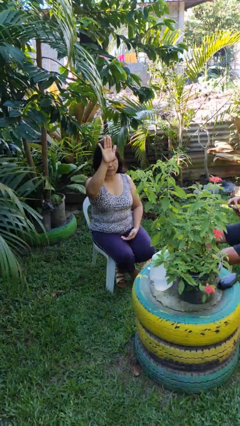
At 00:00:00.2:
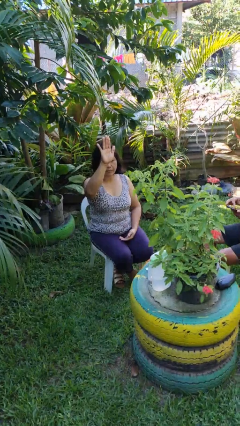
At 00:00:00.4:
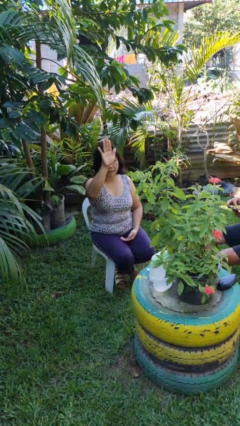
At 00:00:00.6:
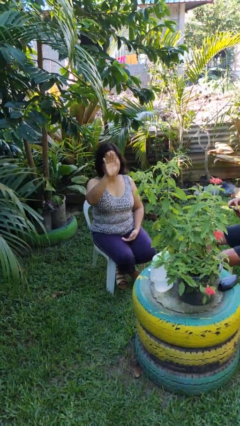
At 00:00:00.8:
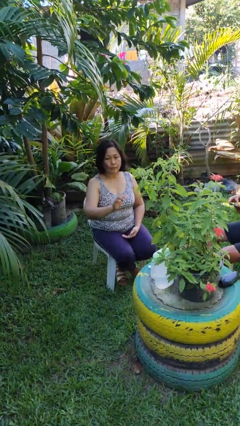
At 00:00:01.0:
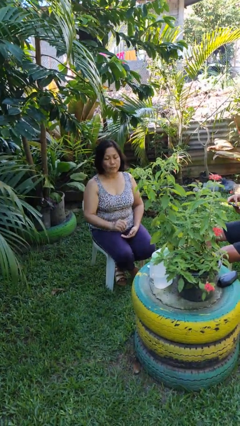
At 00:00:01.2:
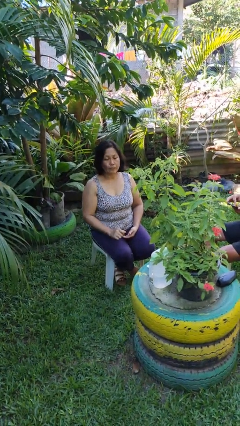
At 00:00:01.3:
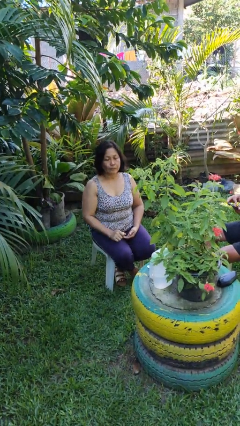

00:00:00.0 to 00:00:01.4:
person gestures swipe down

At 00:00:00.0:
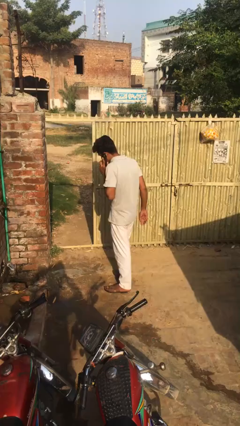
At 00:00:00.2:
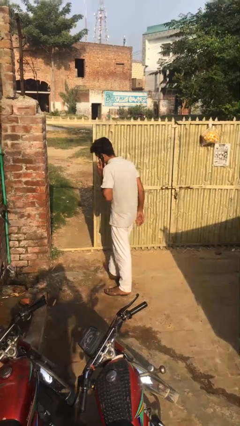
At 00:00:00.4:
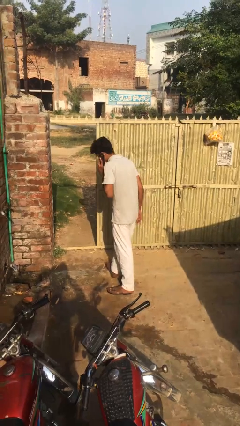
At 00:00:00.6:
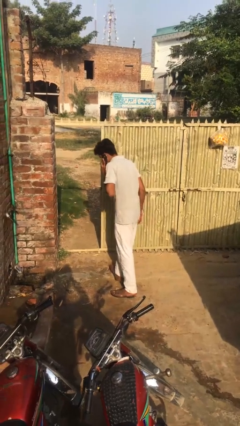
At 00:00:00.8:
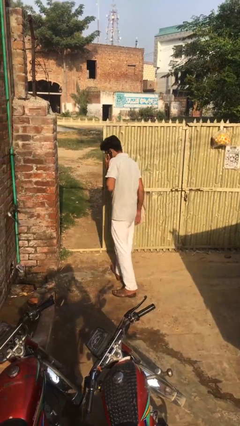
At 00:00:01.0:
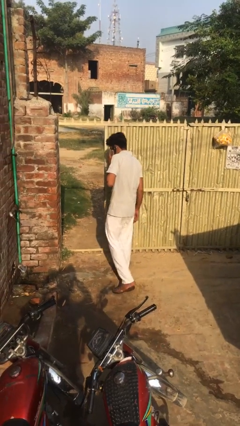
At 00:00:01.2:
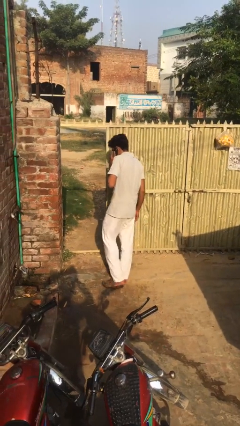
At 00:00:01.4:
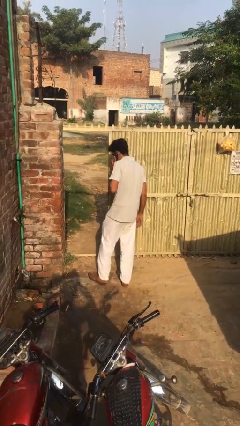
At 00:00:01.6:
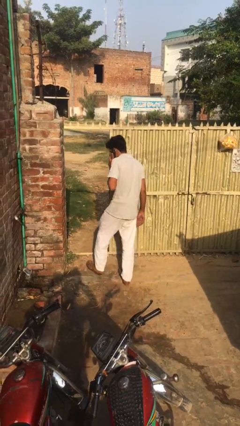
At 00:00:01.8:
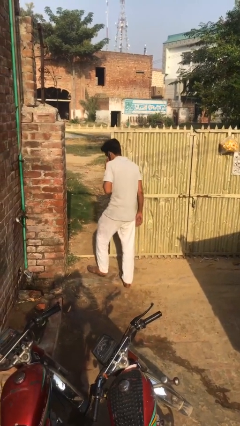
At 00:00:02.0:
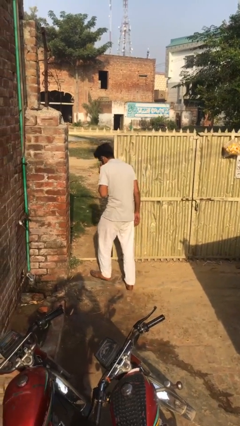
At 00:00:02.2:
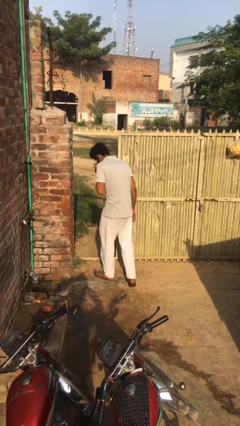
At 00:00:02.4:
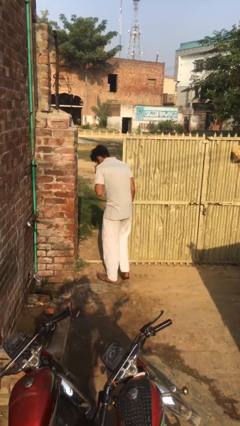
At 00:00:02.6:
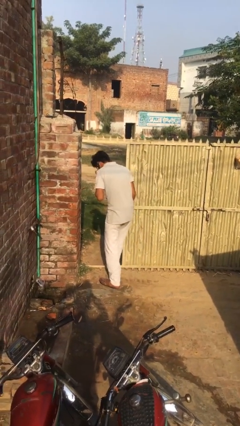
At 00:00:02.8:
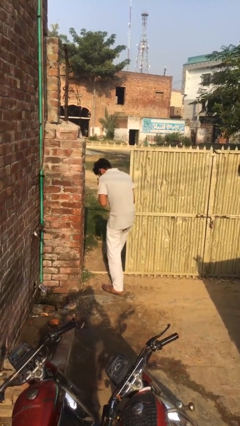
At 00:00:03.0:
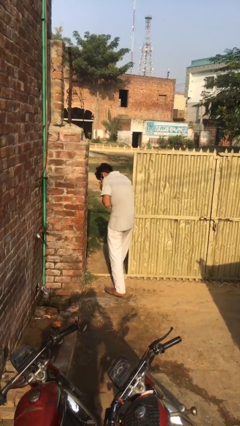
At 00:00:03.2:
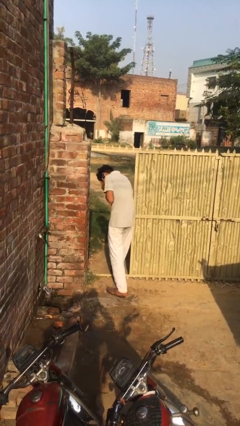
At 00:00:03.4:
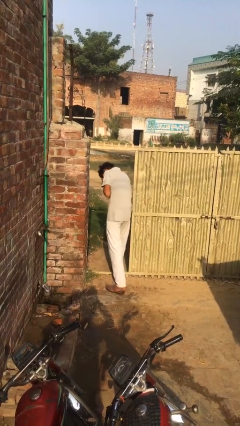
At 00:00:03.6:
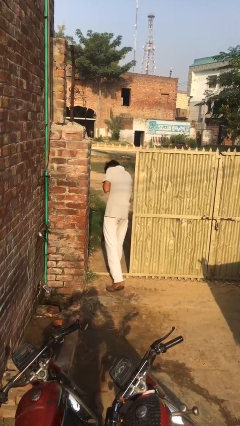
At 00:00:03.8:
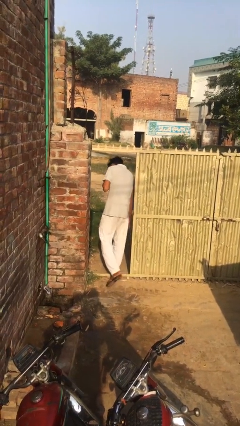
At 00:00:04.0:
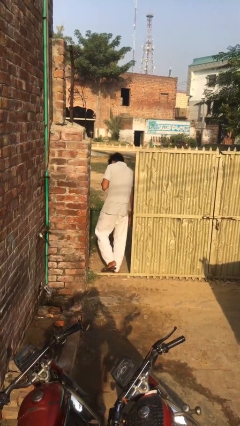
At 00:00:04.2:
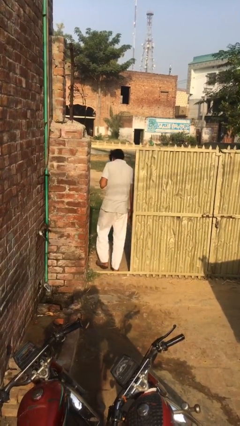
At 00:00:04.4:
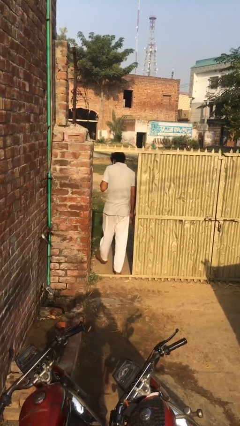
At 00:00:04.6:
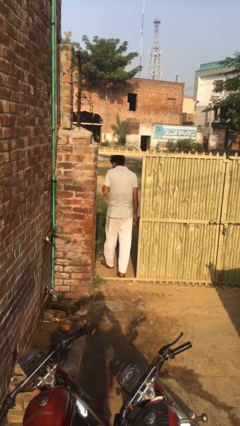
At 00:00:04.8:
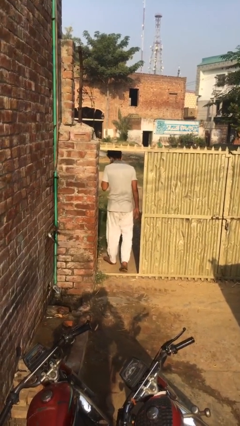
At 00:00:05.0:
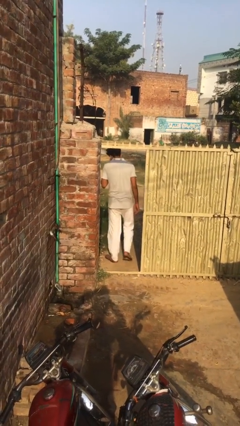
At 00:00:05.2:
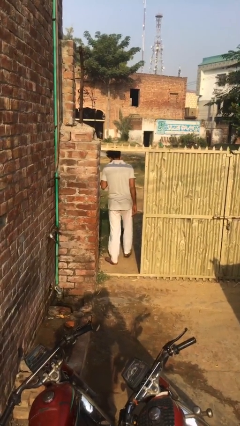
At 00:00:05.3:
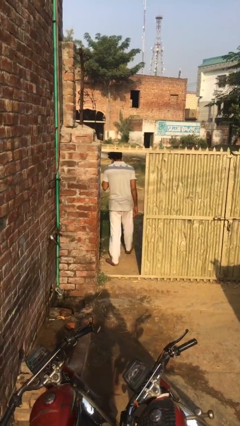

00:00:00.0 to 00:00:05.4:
person exits scene through structure

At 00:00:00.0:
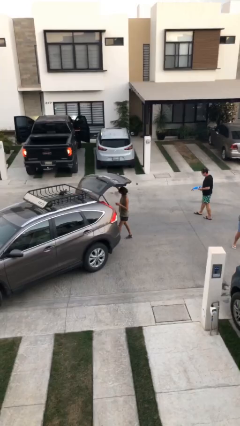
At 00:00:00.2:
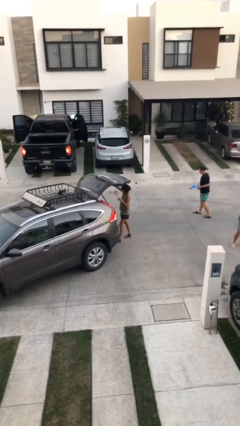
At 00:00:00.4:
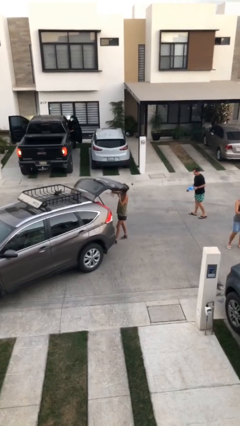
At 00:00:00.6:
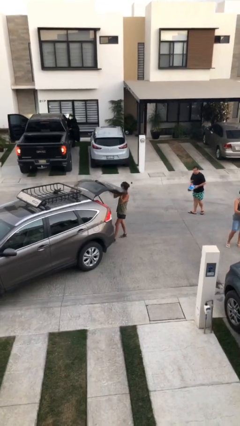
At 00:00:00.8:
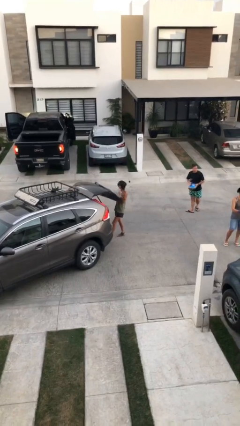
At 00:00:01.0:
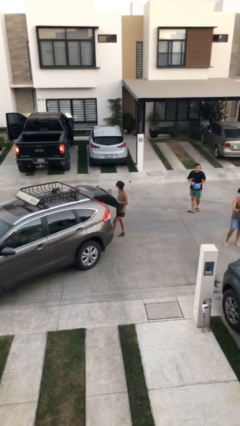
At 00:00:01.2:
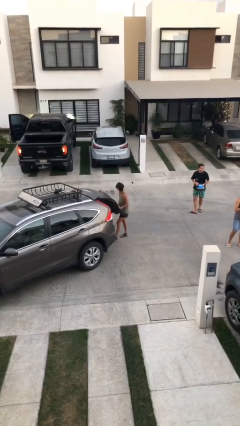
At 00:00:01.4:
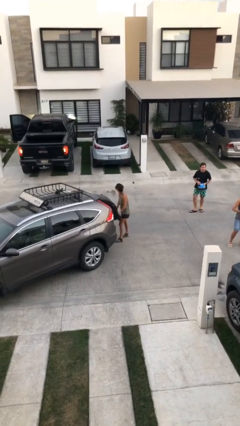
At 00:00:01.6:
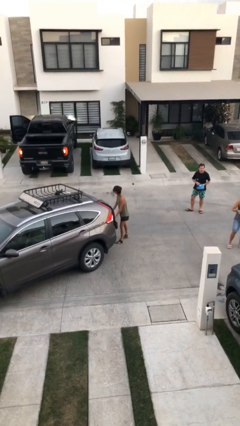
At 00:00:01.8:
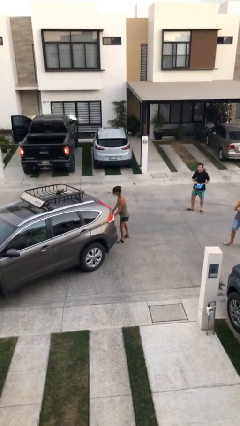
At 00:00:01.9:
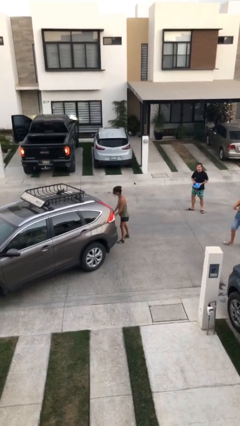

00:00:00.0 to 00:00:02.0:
person closes car trunk

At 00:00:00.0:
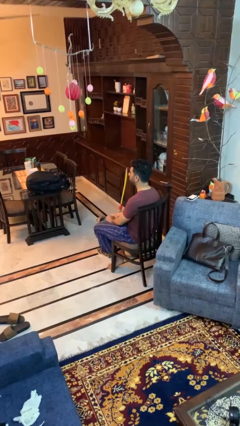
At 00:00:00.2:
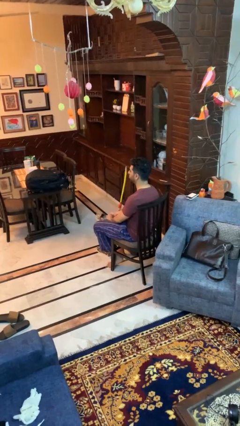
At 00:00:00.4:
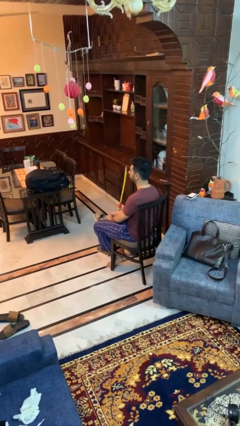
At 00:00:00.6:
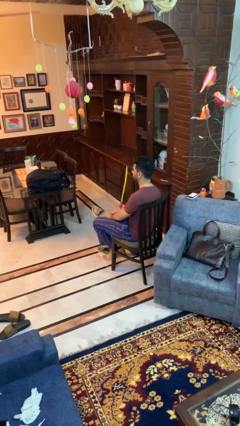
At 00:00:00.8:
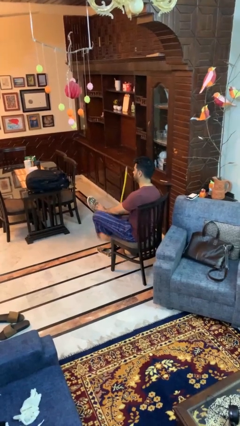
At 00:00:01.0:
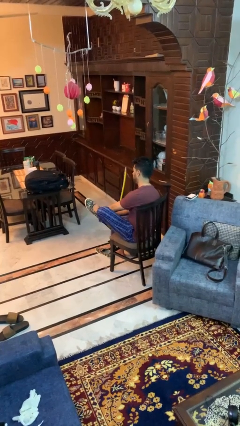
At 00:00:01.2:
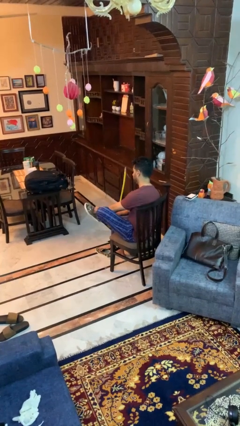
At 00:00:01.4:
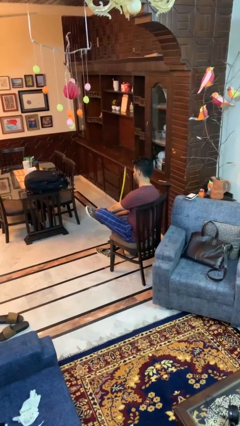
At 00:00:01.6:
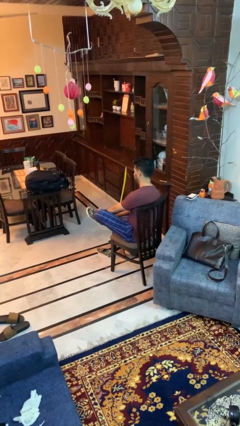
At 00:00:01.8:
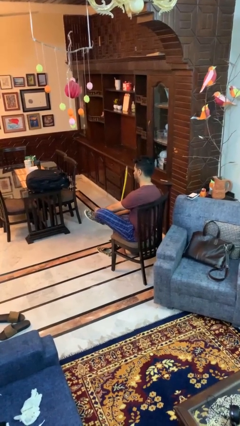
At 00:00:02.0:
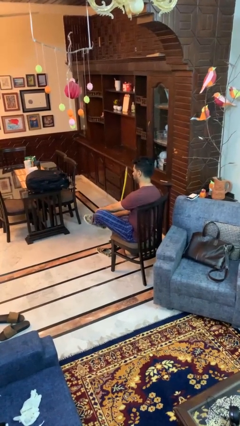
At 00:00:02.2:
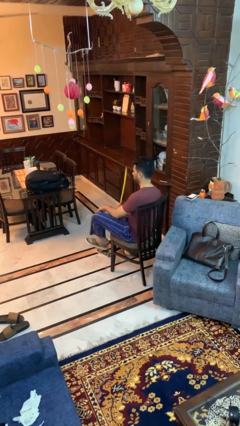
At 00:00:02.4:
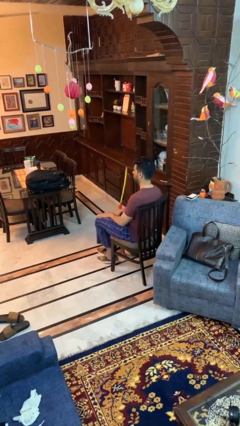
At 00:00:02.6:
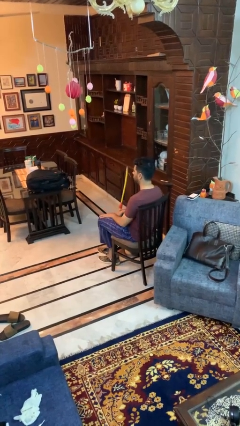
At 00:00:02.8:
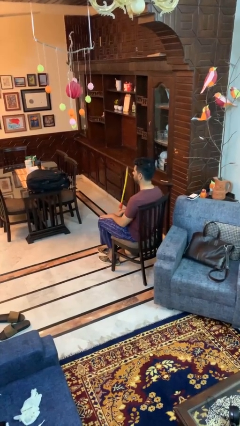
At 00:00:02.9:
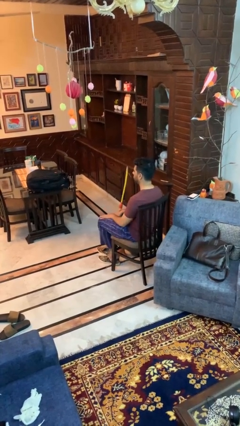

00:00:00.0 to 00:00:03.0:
person puts on shoes

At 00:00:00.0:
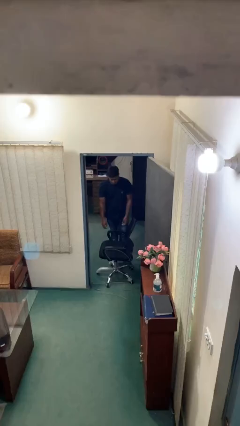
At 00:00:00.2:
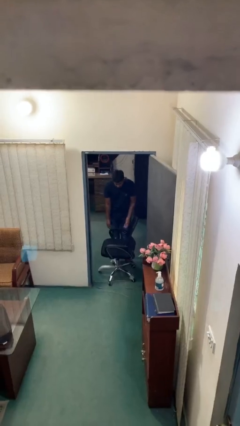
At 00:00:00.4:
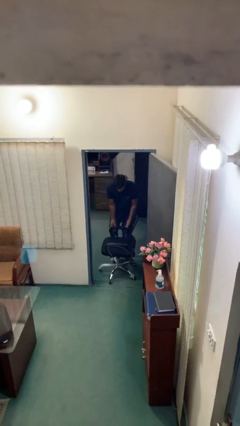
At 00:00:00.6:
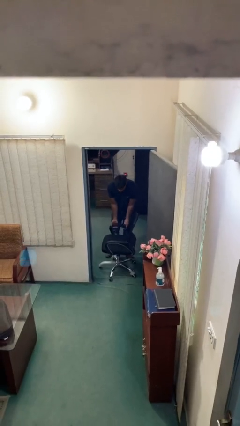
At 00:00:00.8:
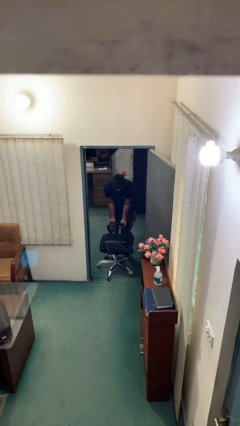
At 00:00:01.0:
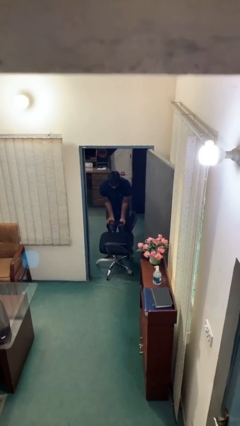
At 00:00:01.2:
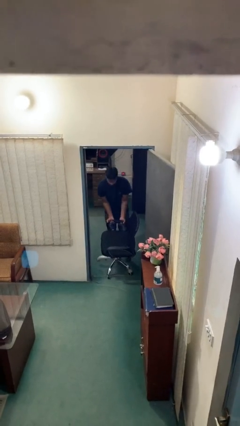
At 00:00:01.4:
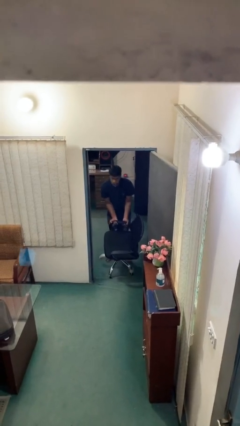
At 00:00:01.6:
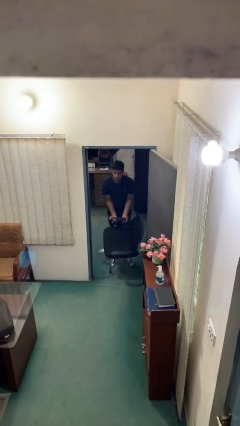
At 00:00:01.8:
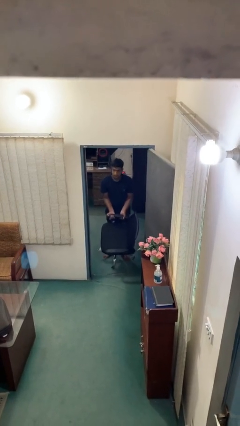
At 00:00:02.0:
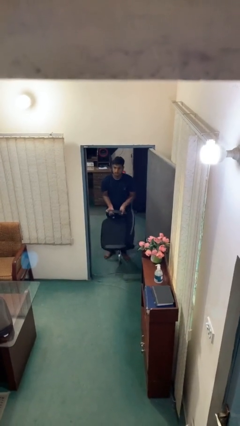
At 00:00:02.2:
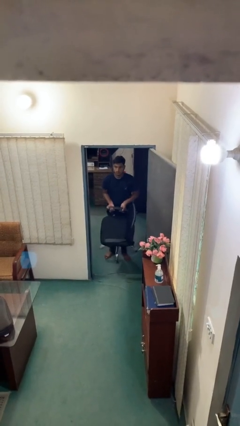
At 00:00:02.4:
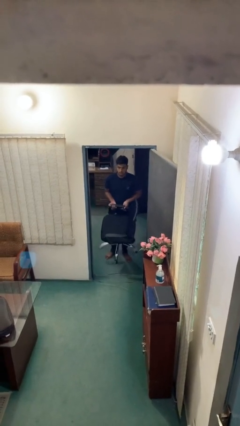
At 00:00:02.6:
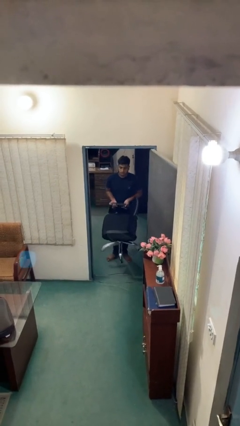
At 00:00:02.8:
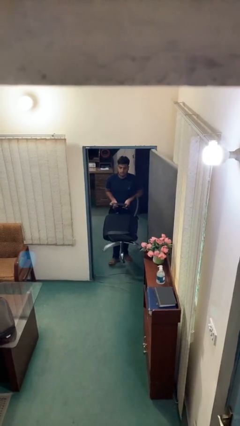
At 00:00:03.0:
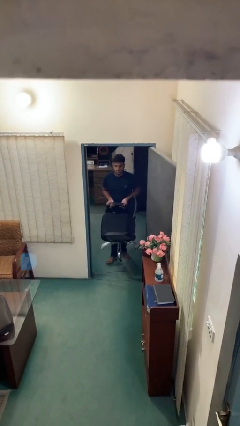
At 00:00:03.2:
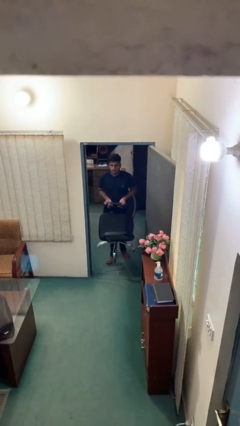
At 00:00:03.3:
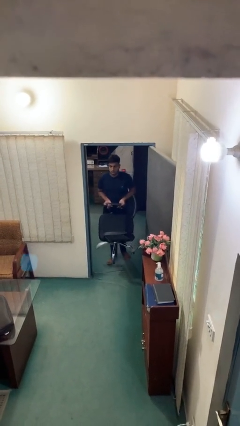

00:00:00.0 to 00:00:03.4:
person picks up object from floor
